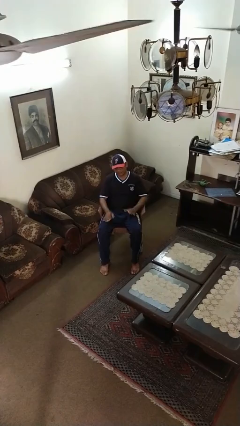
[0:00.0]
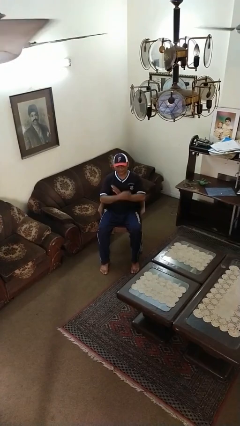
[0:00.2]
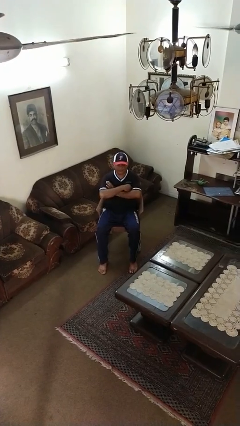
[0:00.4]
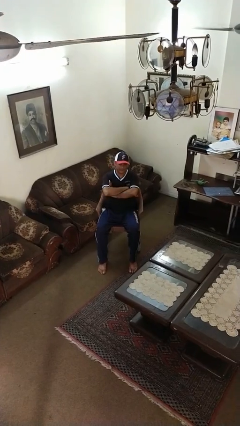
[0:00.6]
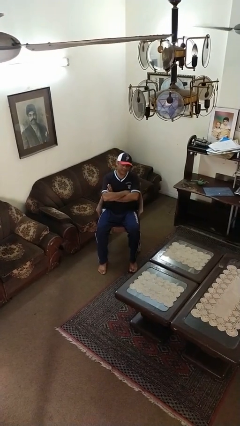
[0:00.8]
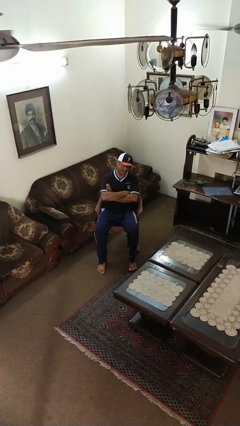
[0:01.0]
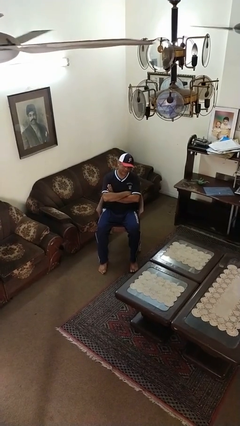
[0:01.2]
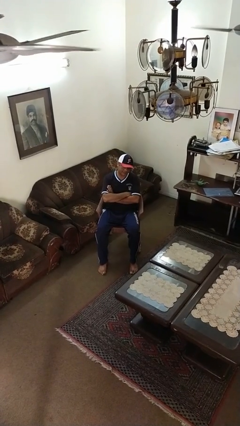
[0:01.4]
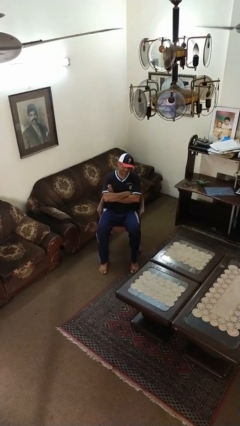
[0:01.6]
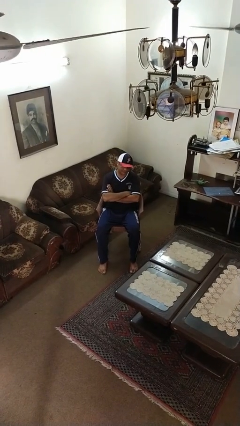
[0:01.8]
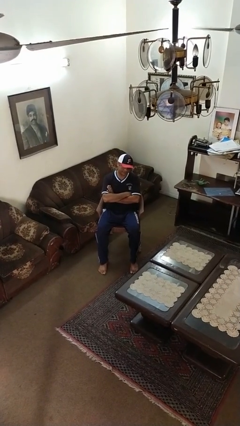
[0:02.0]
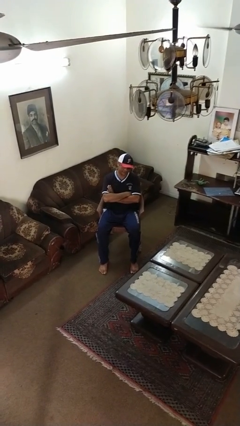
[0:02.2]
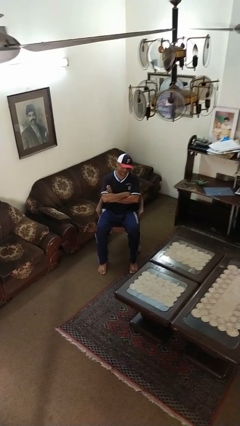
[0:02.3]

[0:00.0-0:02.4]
person crosses arms

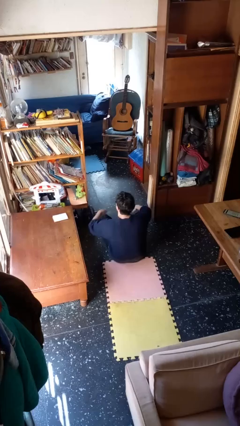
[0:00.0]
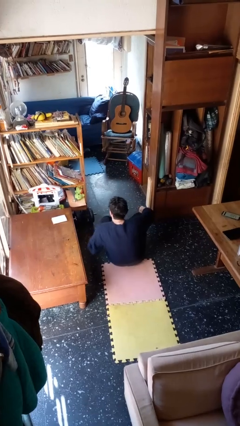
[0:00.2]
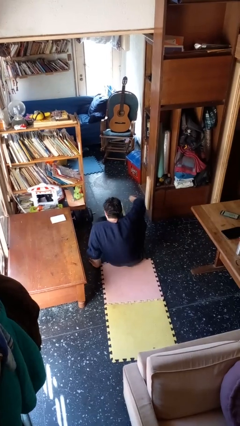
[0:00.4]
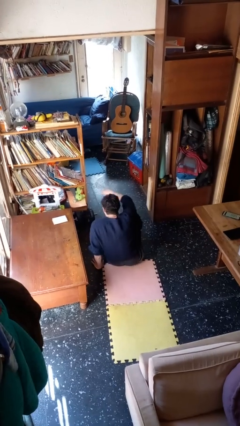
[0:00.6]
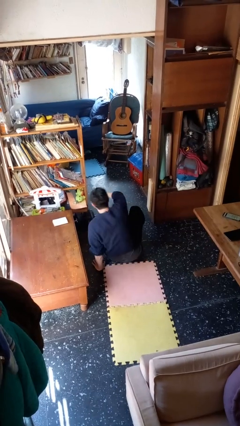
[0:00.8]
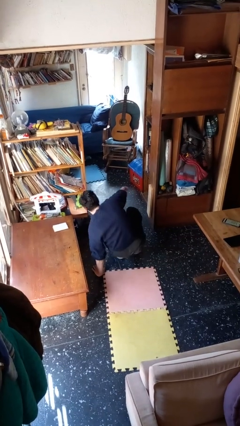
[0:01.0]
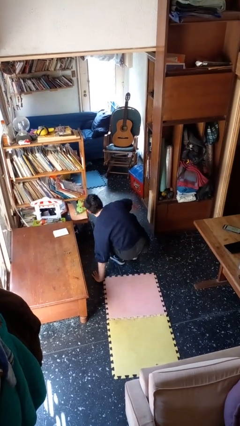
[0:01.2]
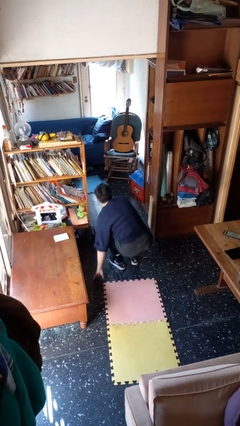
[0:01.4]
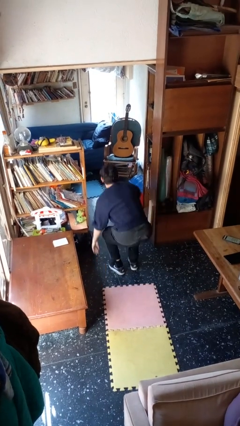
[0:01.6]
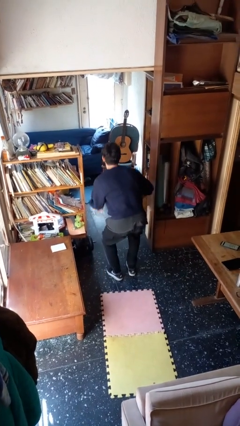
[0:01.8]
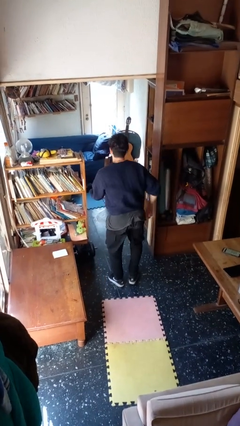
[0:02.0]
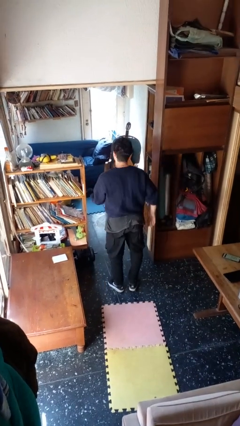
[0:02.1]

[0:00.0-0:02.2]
person stands up from floor

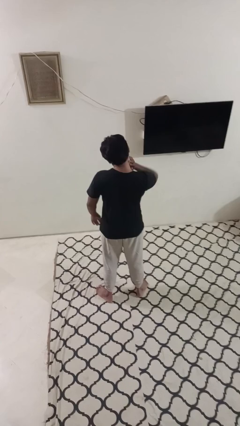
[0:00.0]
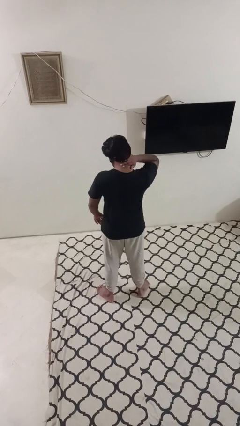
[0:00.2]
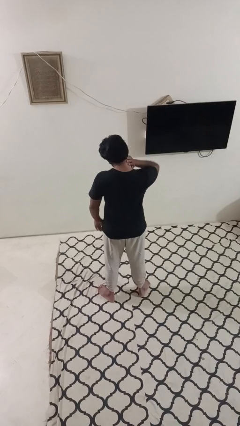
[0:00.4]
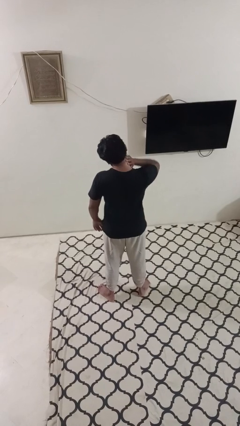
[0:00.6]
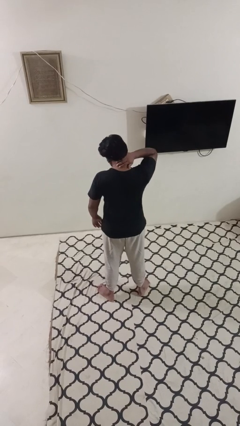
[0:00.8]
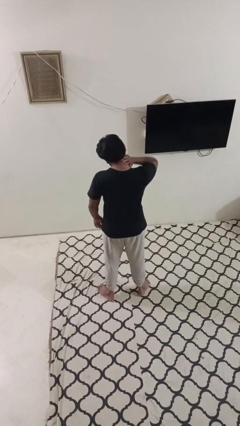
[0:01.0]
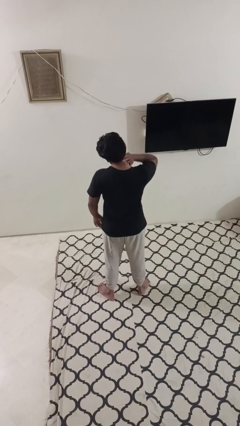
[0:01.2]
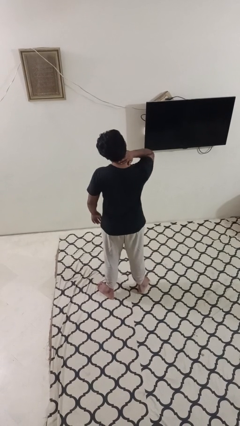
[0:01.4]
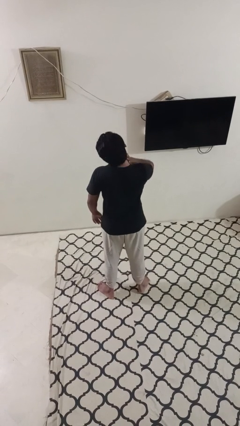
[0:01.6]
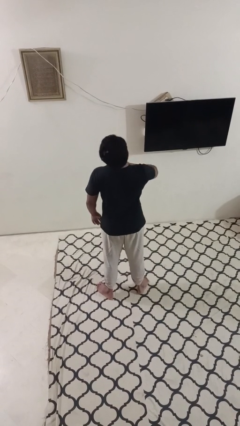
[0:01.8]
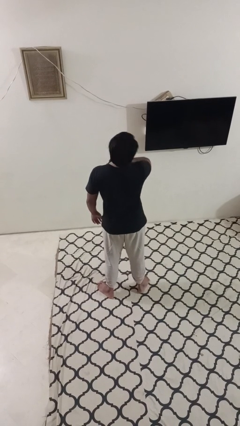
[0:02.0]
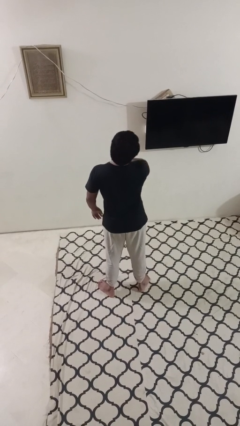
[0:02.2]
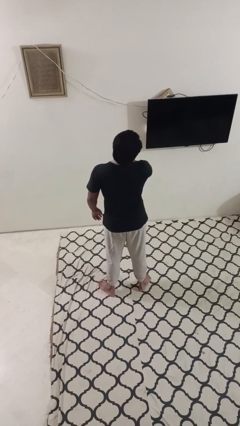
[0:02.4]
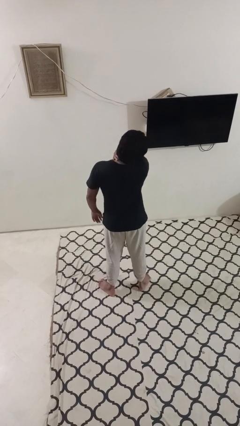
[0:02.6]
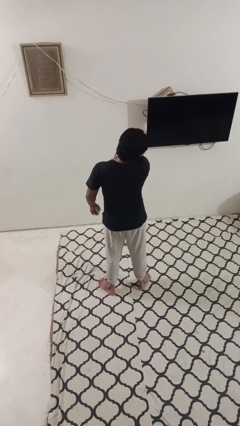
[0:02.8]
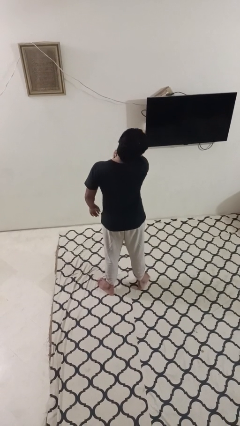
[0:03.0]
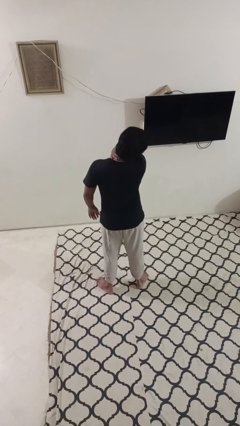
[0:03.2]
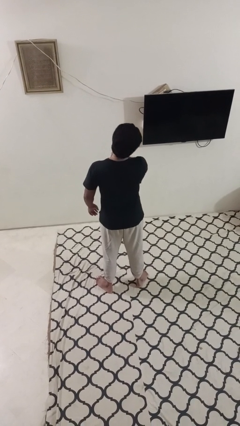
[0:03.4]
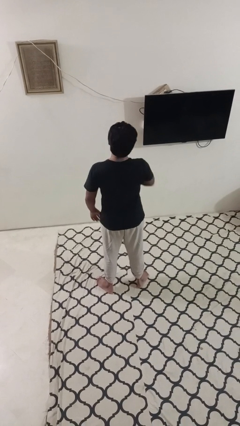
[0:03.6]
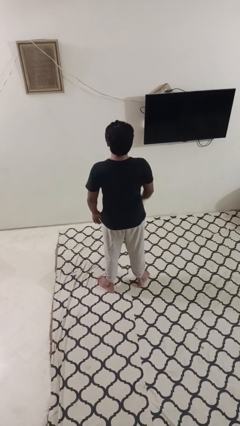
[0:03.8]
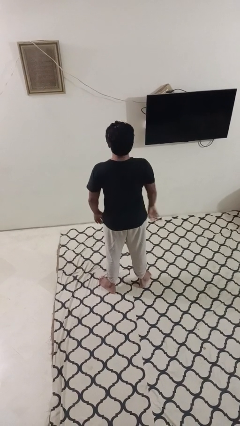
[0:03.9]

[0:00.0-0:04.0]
person rubs neck

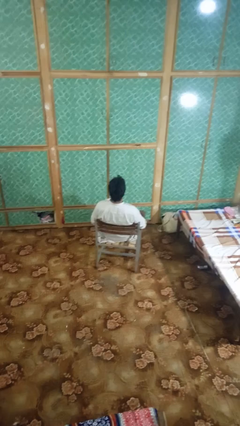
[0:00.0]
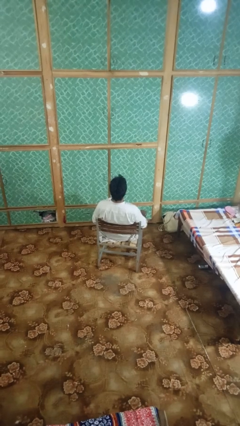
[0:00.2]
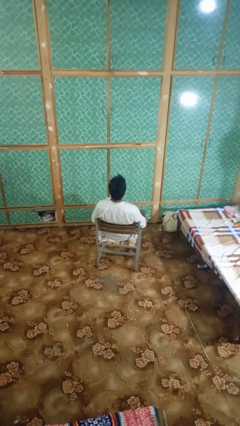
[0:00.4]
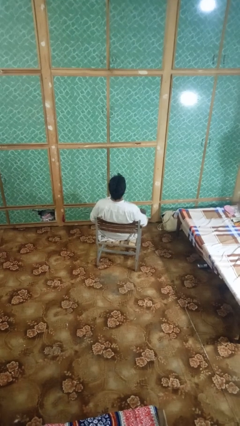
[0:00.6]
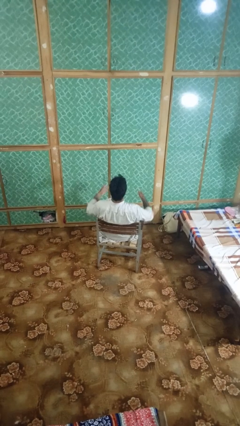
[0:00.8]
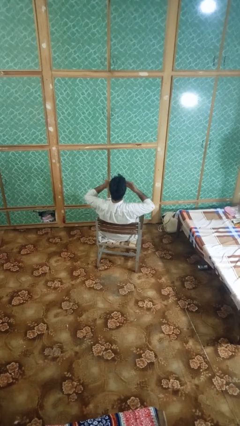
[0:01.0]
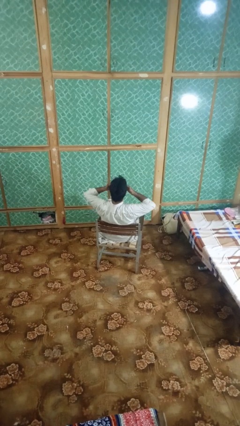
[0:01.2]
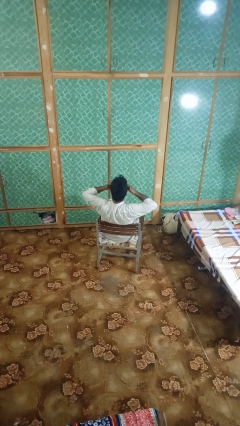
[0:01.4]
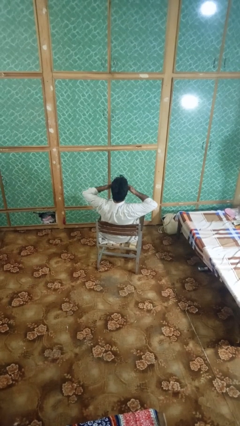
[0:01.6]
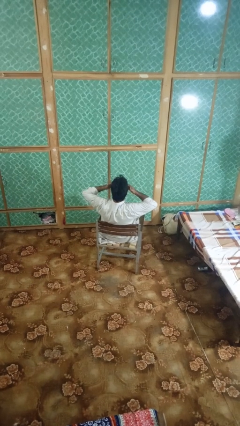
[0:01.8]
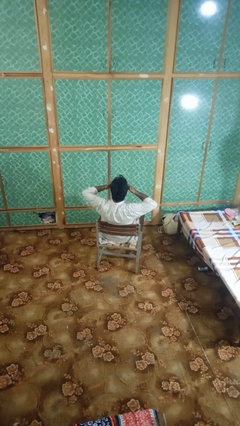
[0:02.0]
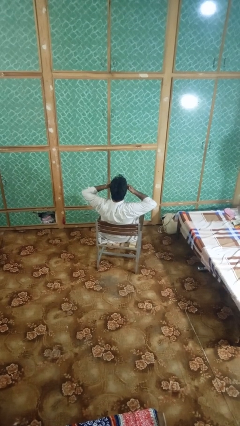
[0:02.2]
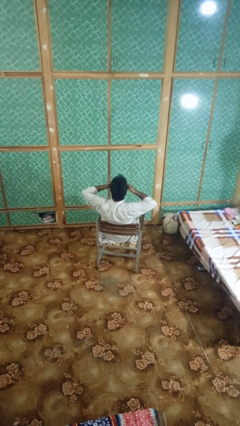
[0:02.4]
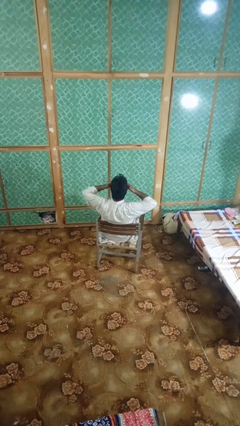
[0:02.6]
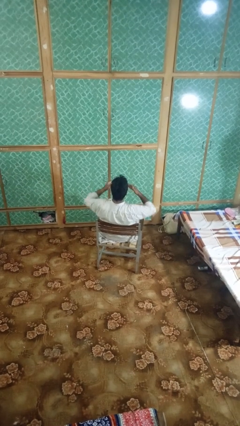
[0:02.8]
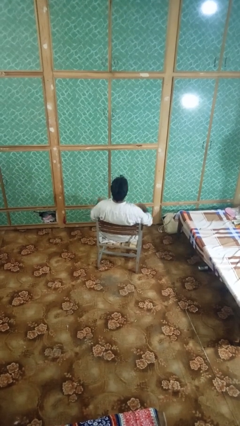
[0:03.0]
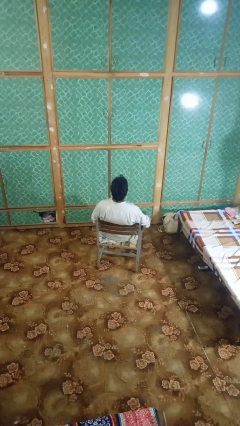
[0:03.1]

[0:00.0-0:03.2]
person shades eyes

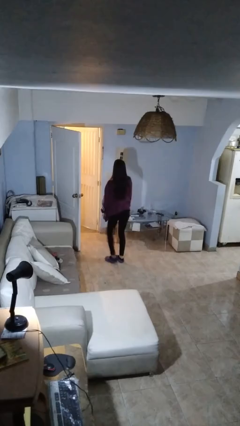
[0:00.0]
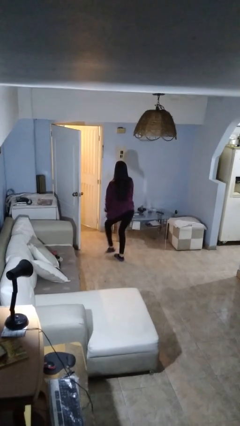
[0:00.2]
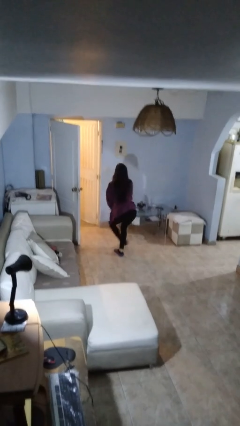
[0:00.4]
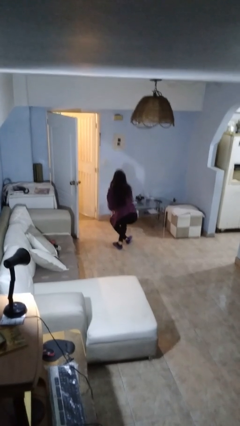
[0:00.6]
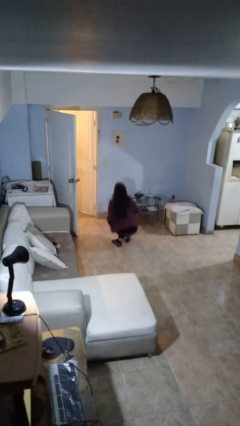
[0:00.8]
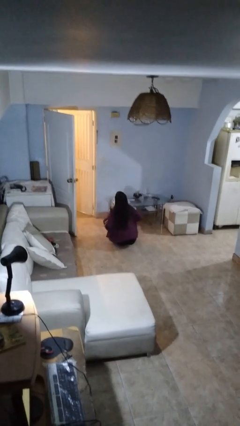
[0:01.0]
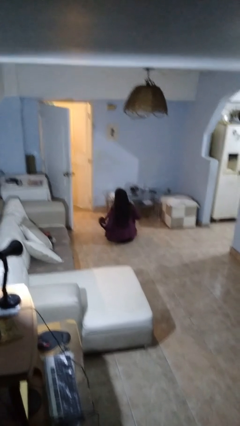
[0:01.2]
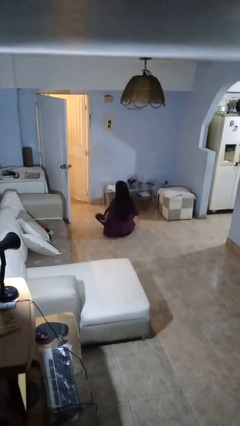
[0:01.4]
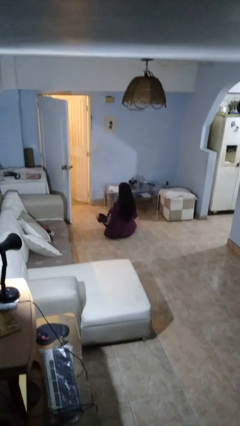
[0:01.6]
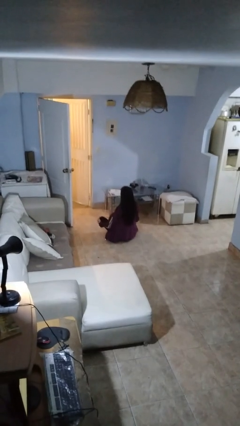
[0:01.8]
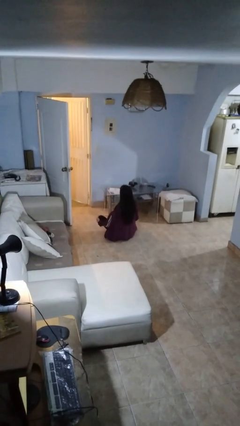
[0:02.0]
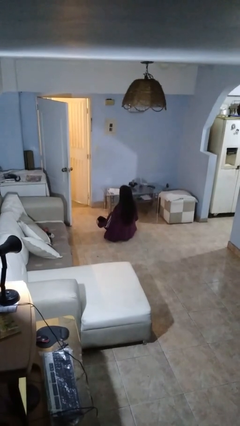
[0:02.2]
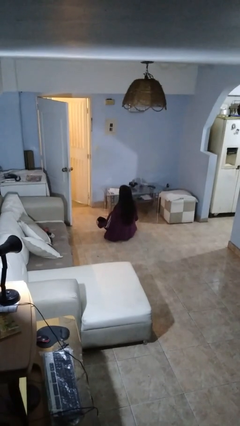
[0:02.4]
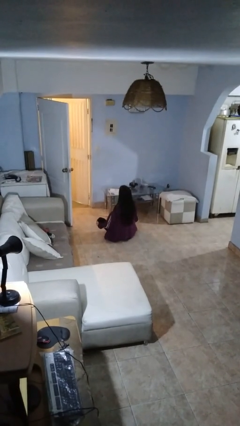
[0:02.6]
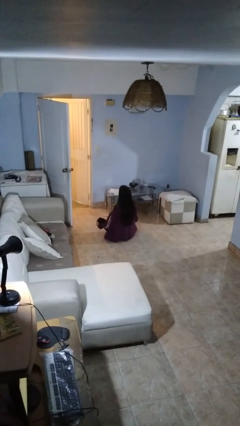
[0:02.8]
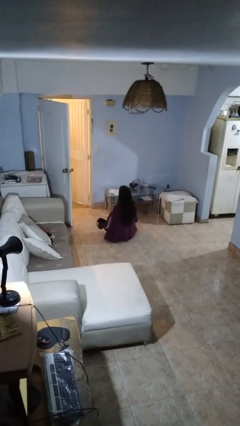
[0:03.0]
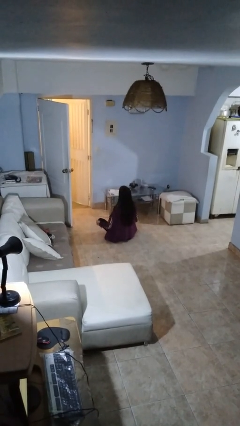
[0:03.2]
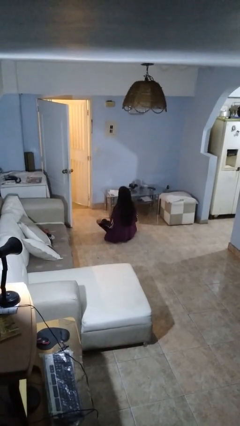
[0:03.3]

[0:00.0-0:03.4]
person sits crisscross

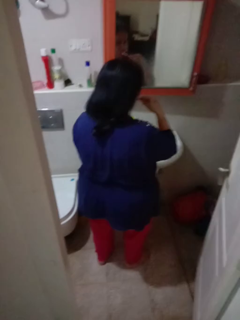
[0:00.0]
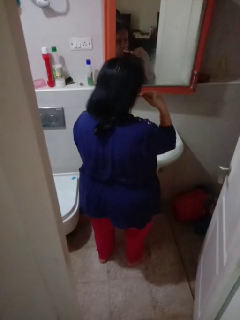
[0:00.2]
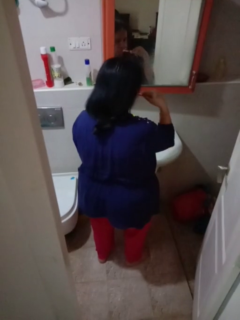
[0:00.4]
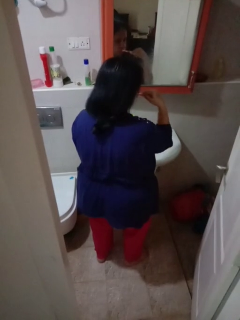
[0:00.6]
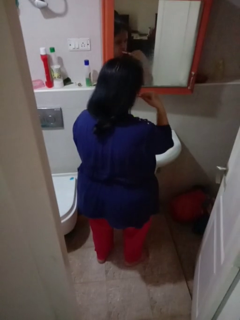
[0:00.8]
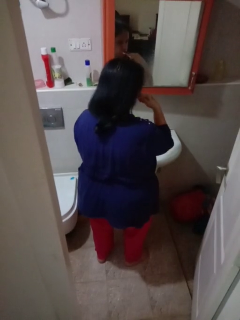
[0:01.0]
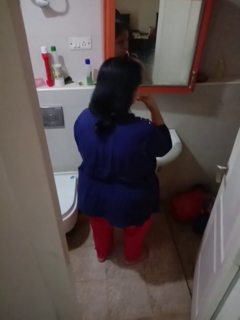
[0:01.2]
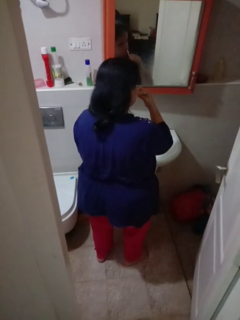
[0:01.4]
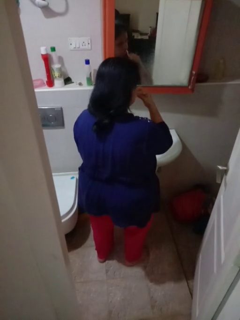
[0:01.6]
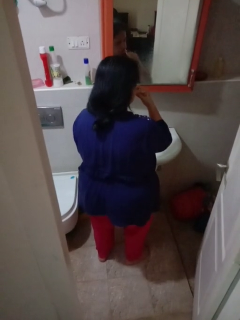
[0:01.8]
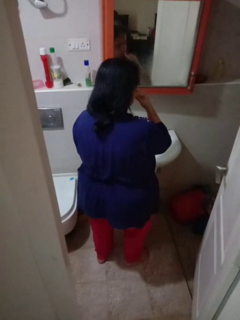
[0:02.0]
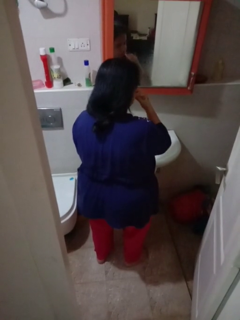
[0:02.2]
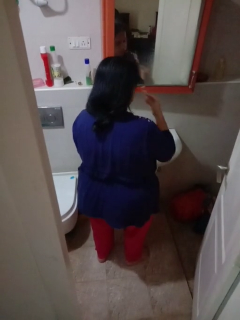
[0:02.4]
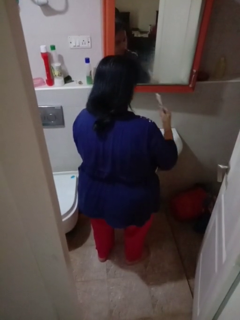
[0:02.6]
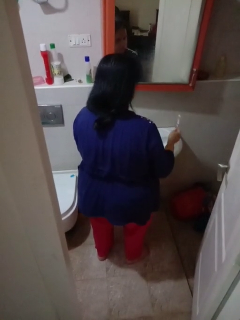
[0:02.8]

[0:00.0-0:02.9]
person brushes teeth
